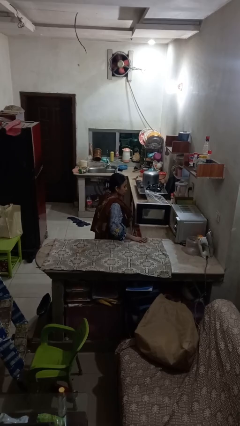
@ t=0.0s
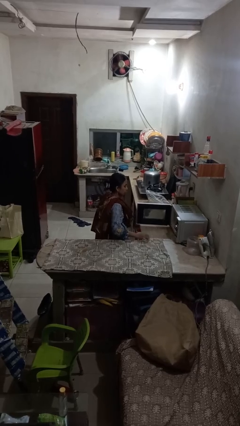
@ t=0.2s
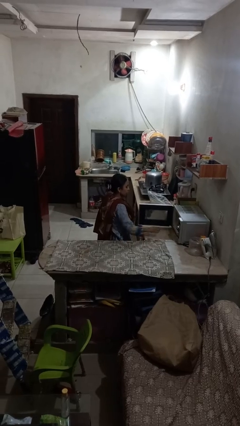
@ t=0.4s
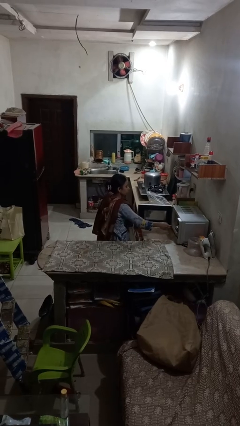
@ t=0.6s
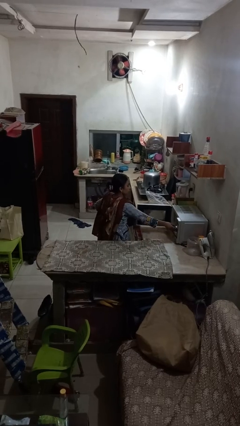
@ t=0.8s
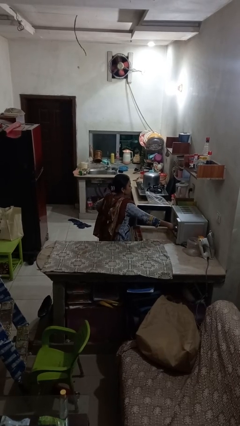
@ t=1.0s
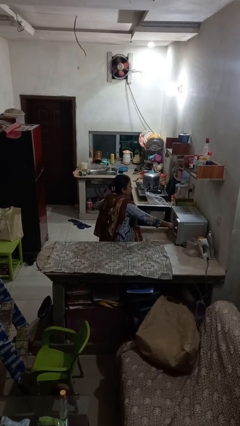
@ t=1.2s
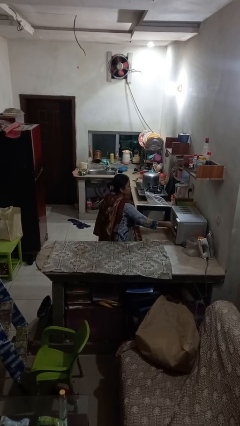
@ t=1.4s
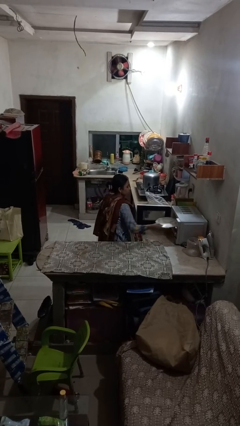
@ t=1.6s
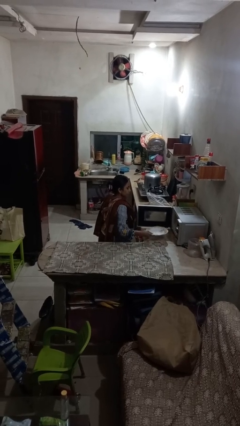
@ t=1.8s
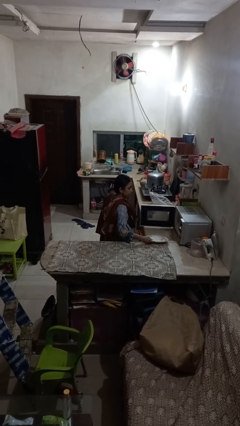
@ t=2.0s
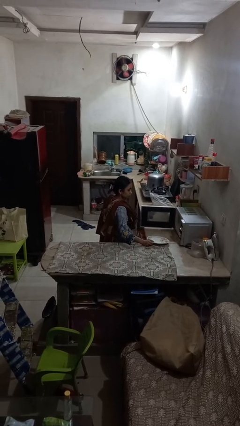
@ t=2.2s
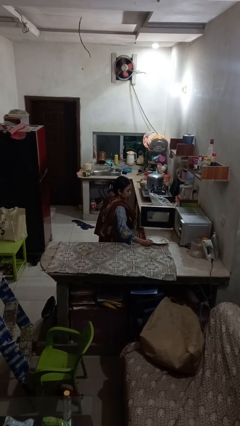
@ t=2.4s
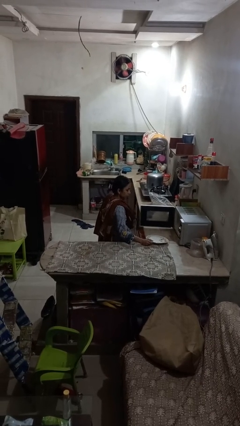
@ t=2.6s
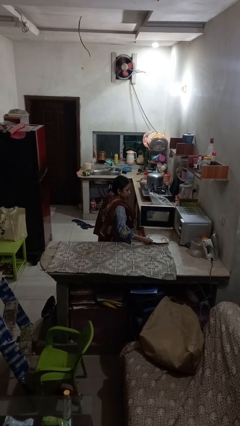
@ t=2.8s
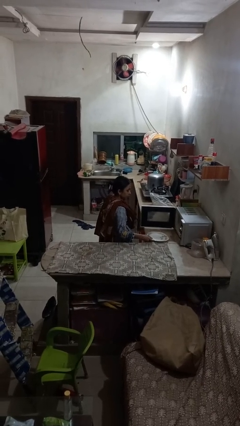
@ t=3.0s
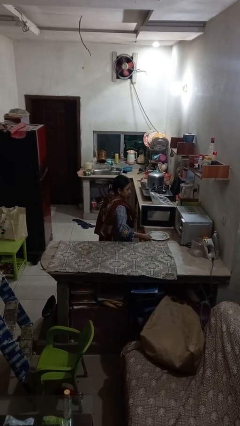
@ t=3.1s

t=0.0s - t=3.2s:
person takes object from microwave

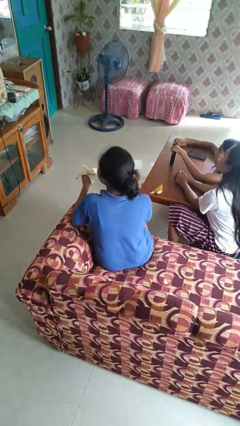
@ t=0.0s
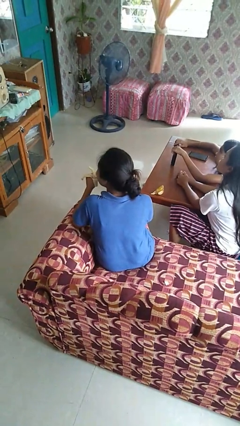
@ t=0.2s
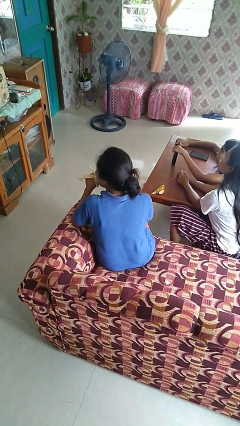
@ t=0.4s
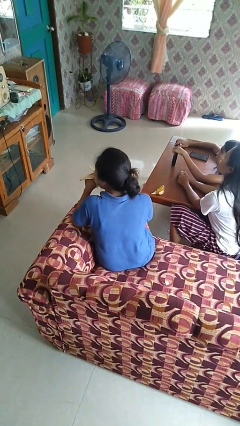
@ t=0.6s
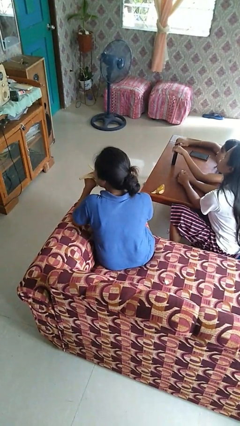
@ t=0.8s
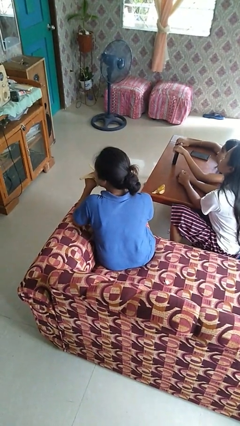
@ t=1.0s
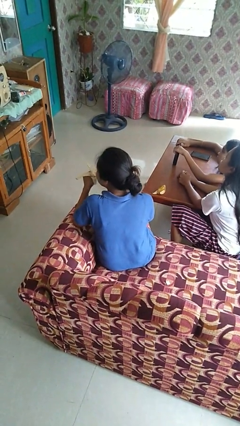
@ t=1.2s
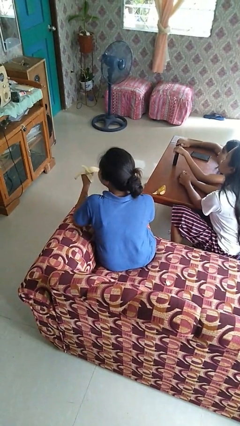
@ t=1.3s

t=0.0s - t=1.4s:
person eats banana

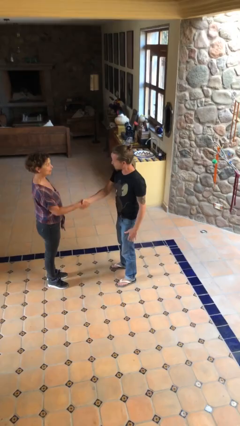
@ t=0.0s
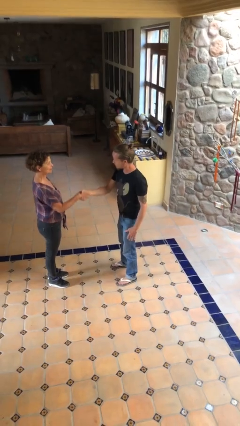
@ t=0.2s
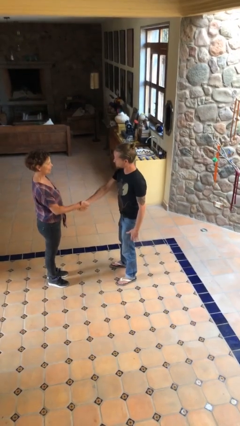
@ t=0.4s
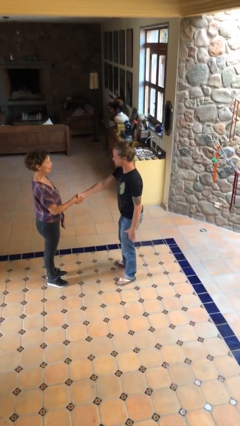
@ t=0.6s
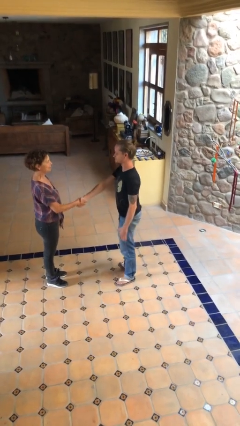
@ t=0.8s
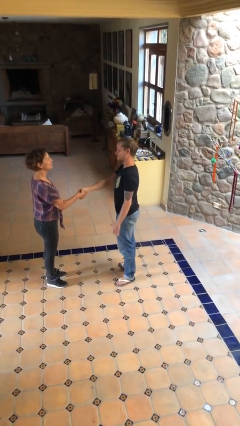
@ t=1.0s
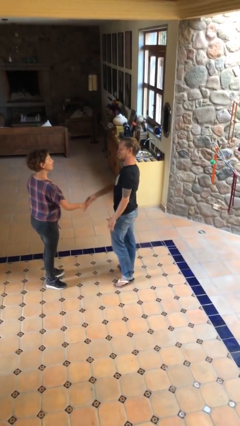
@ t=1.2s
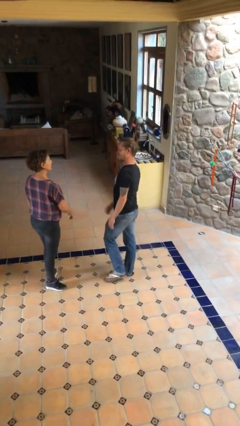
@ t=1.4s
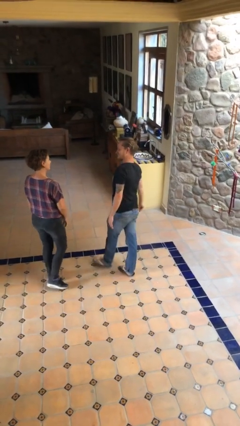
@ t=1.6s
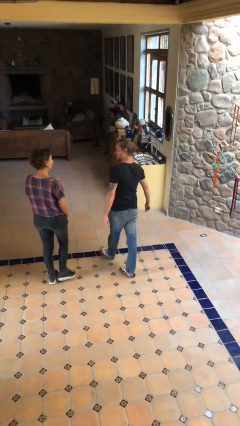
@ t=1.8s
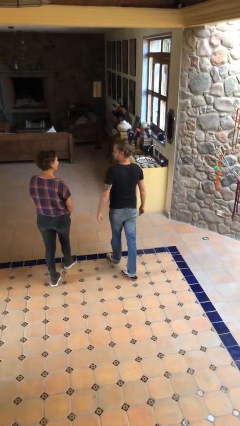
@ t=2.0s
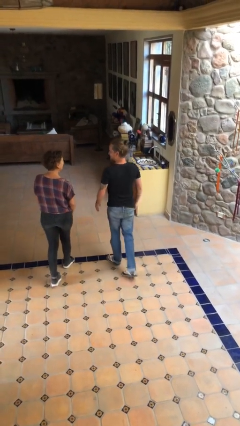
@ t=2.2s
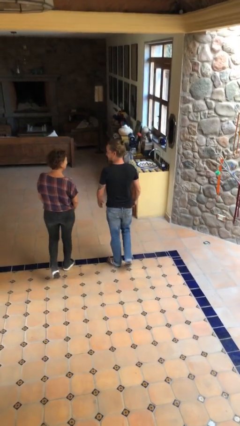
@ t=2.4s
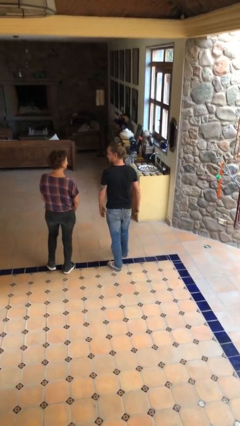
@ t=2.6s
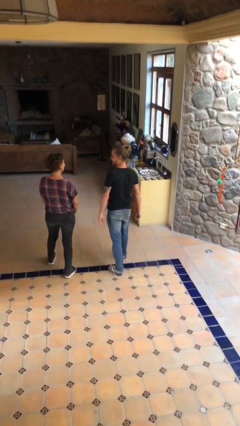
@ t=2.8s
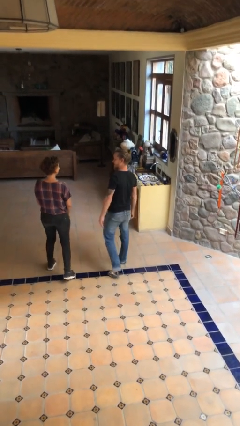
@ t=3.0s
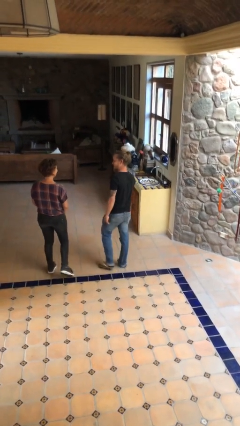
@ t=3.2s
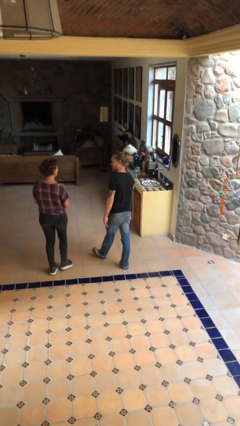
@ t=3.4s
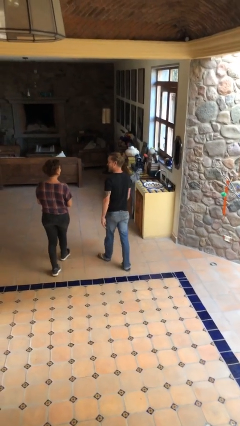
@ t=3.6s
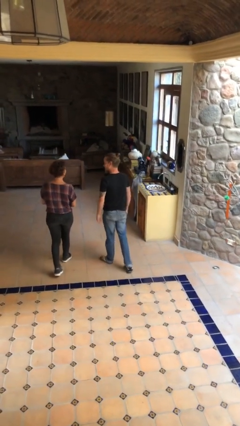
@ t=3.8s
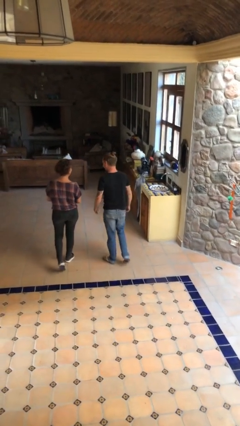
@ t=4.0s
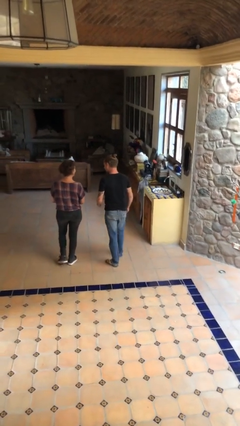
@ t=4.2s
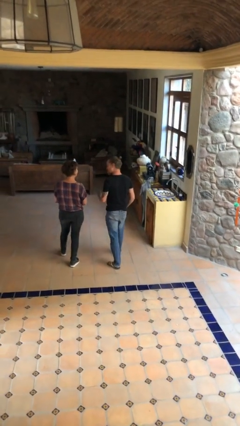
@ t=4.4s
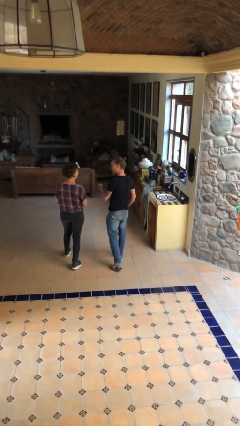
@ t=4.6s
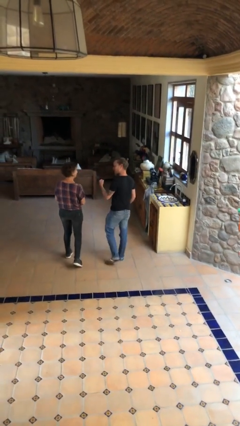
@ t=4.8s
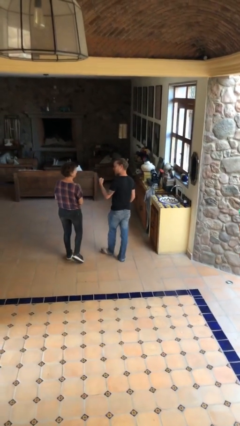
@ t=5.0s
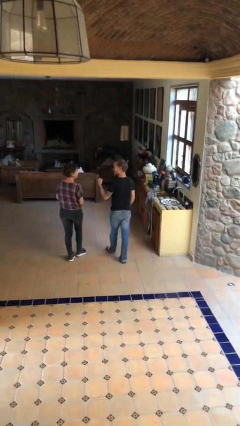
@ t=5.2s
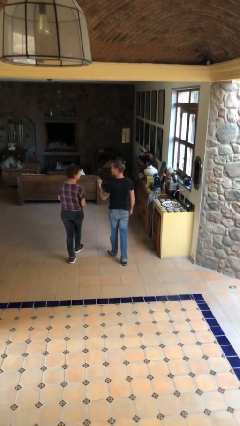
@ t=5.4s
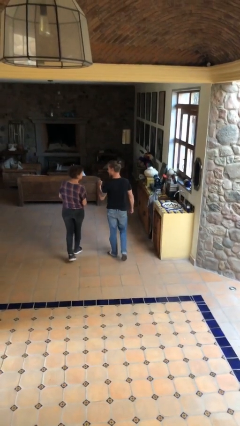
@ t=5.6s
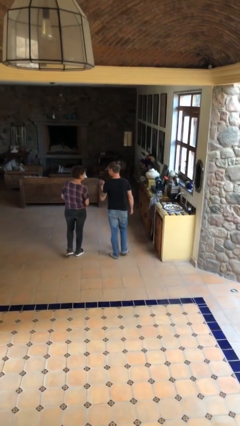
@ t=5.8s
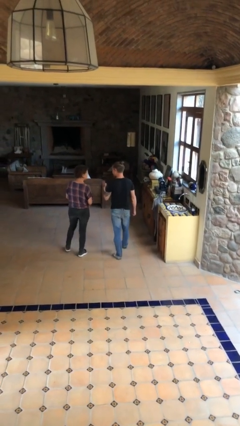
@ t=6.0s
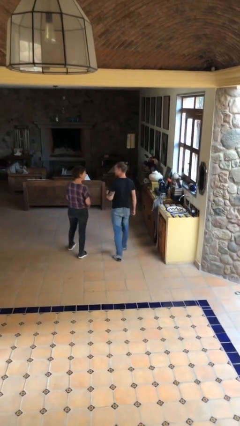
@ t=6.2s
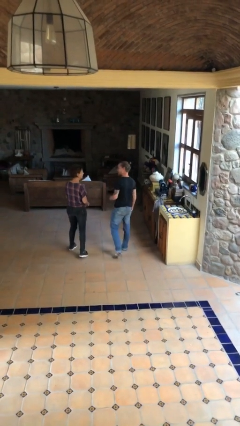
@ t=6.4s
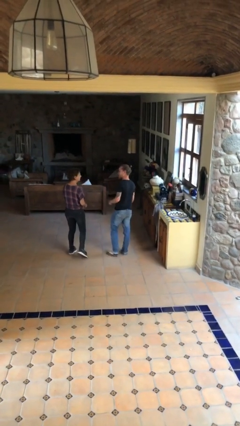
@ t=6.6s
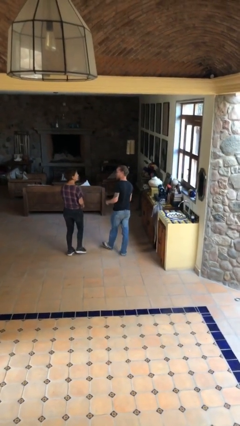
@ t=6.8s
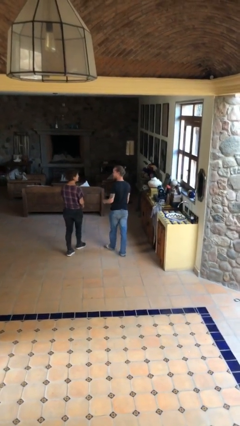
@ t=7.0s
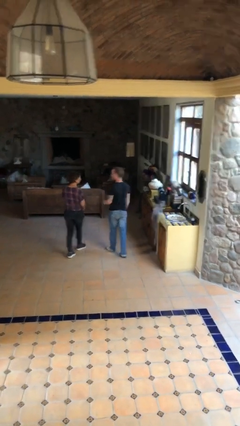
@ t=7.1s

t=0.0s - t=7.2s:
person talks to person

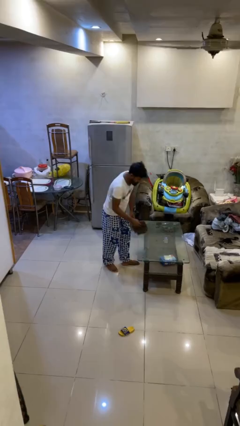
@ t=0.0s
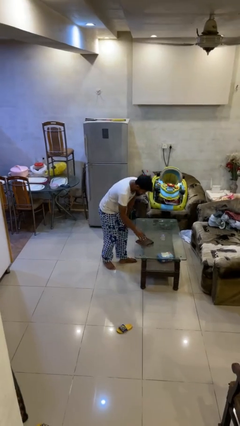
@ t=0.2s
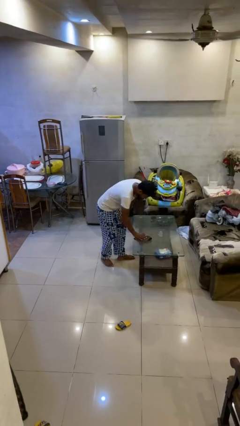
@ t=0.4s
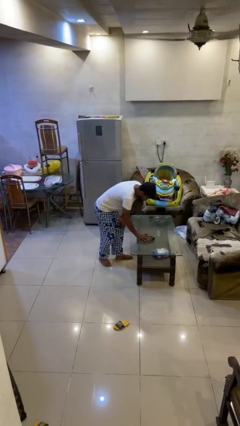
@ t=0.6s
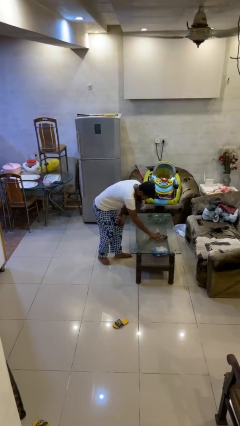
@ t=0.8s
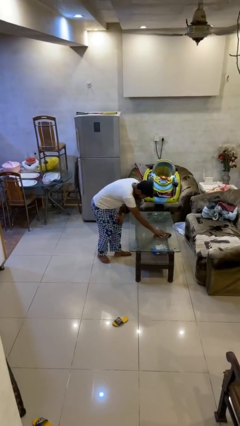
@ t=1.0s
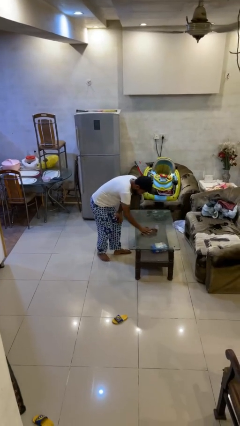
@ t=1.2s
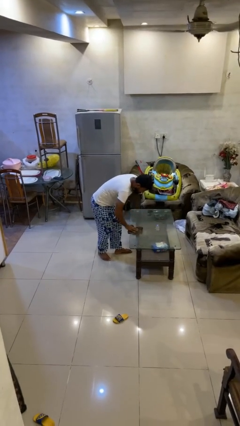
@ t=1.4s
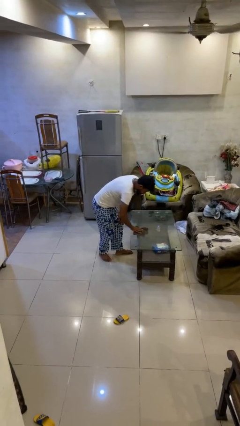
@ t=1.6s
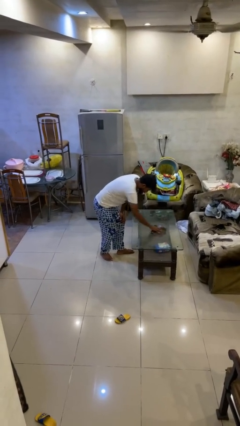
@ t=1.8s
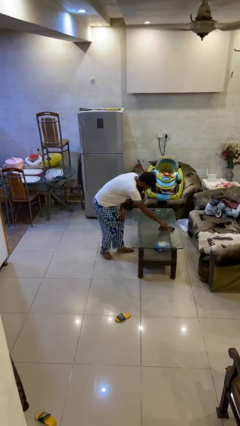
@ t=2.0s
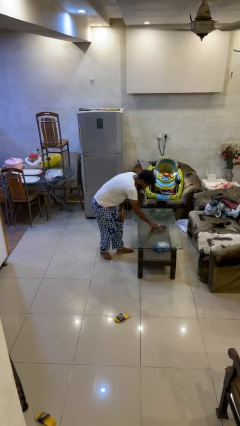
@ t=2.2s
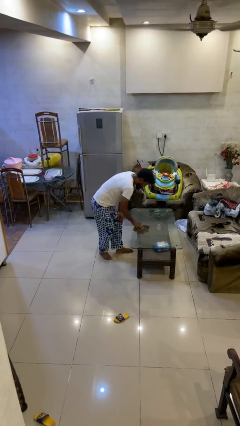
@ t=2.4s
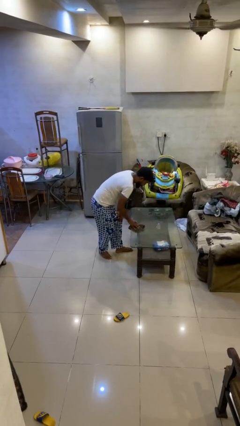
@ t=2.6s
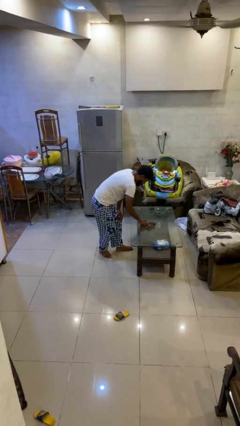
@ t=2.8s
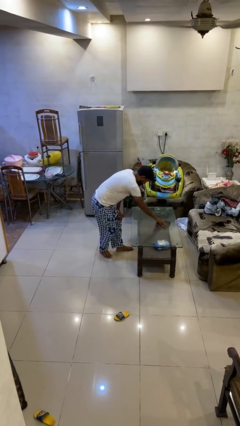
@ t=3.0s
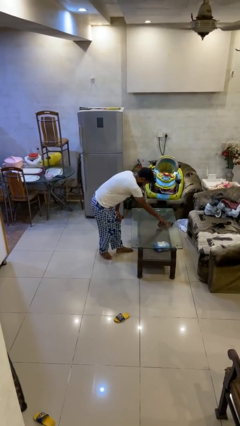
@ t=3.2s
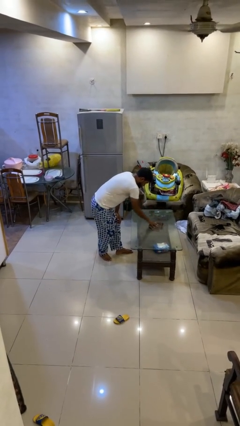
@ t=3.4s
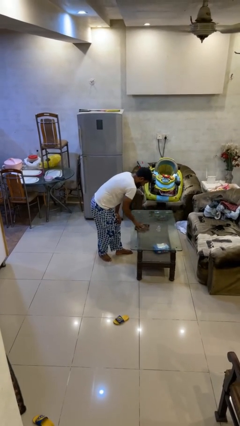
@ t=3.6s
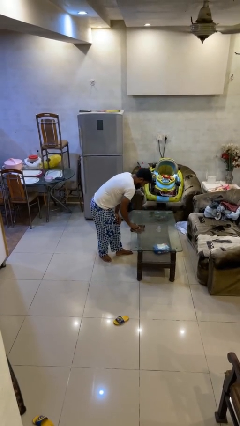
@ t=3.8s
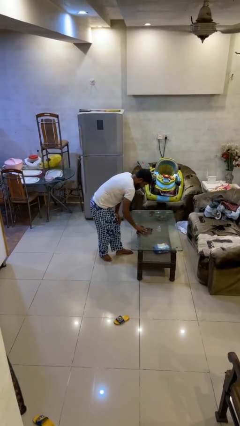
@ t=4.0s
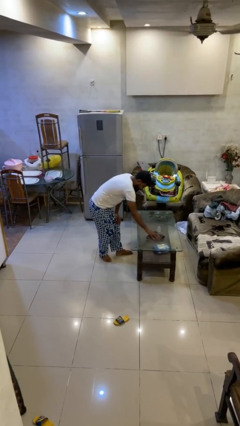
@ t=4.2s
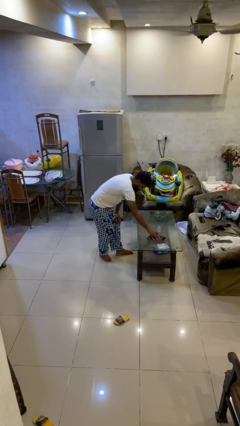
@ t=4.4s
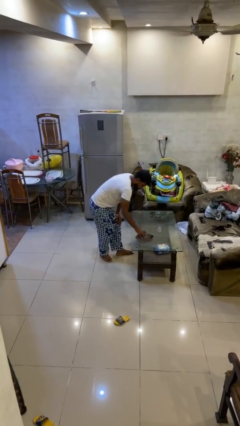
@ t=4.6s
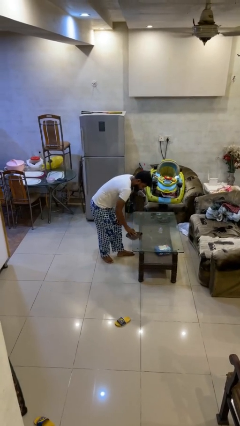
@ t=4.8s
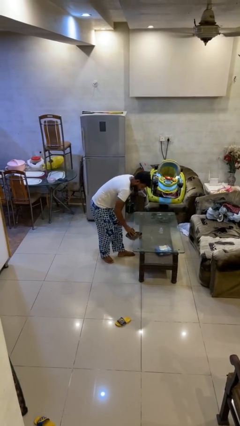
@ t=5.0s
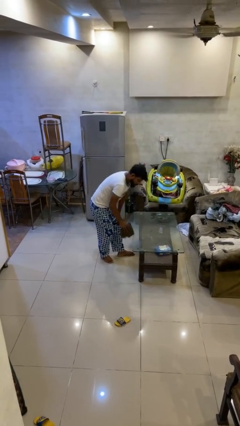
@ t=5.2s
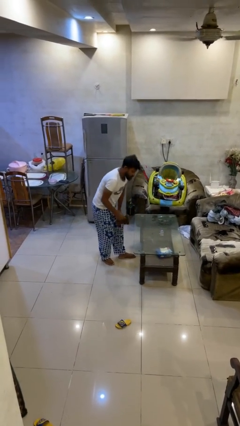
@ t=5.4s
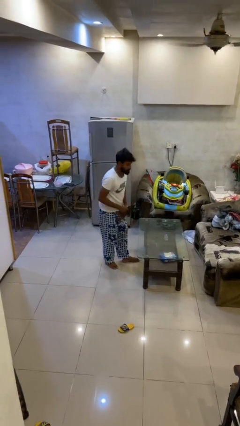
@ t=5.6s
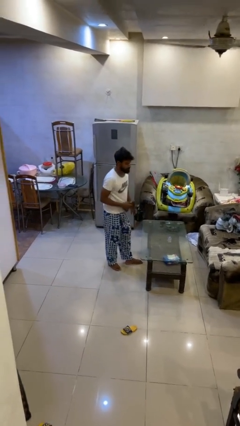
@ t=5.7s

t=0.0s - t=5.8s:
person cleans table with rag
